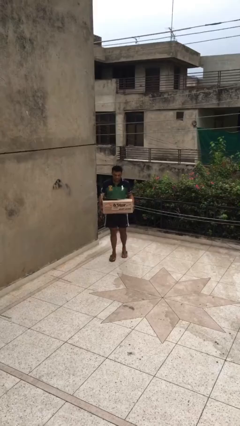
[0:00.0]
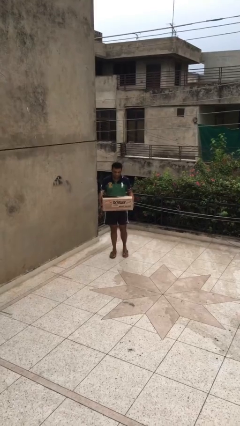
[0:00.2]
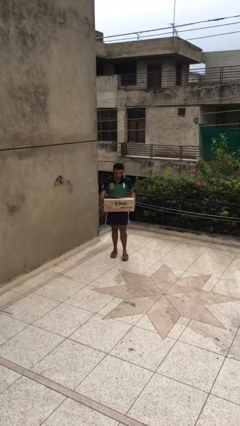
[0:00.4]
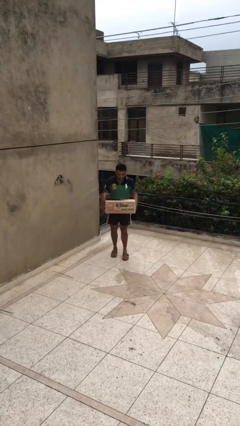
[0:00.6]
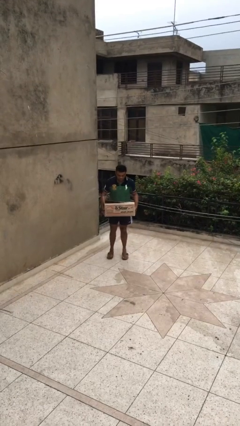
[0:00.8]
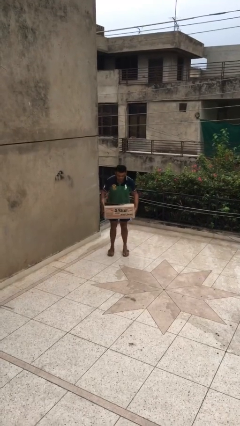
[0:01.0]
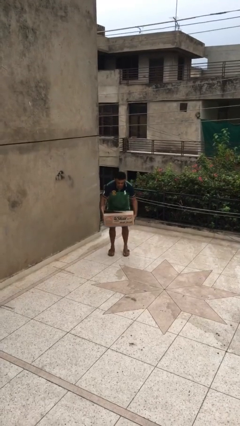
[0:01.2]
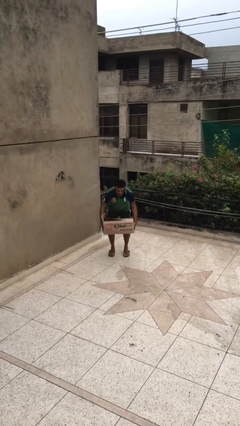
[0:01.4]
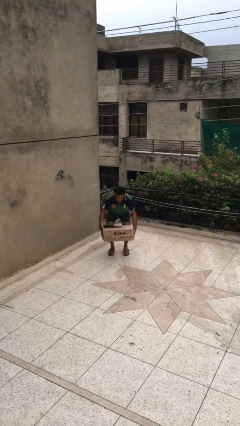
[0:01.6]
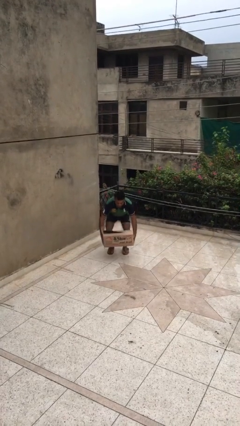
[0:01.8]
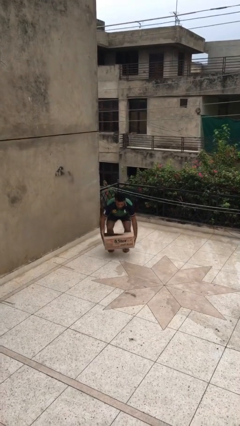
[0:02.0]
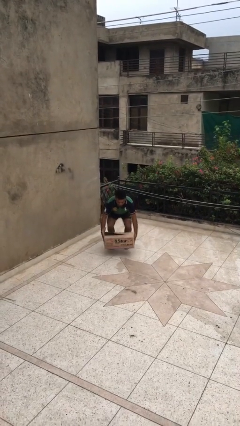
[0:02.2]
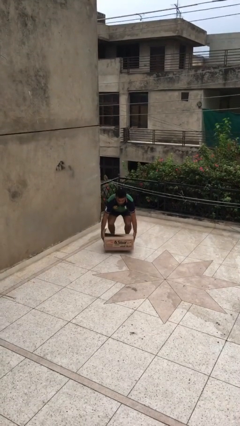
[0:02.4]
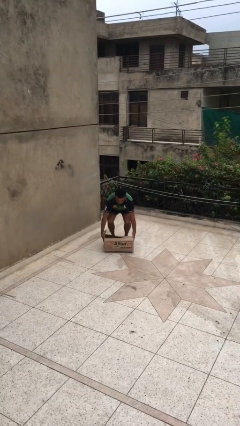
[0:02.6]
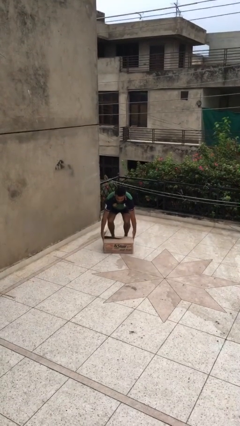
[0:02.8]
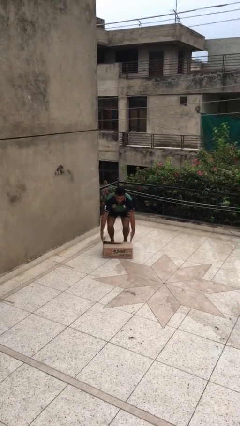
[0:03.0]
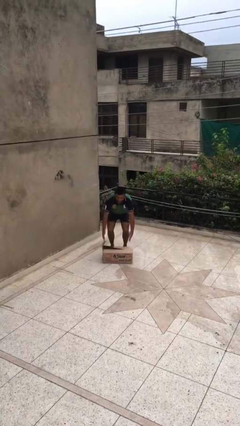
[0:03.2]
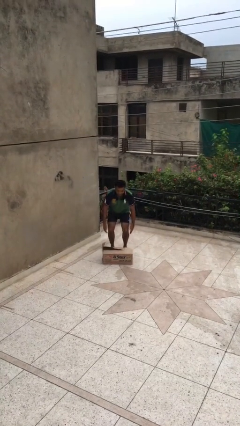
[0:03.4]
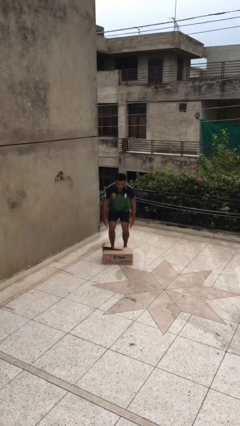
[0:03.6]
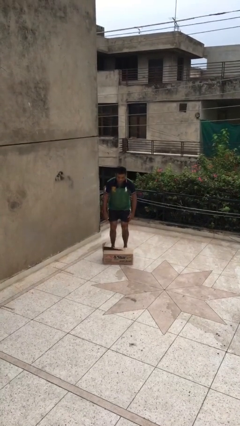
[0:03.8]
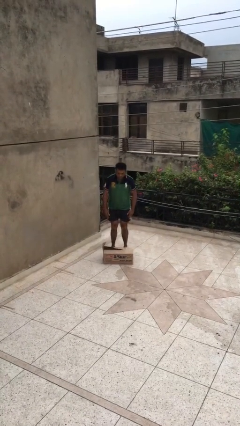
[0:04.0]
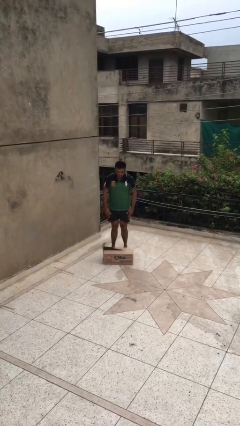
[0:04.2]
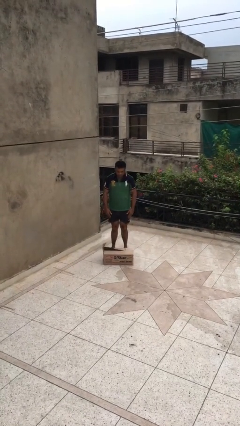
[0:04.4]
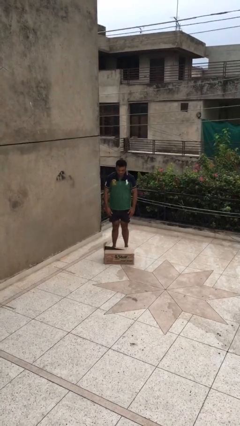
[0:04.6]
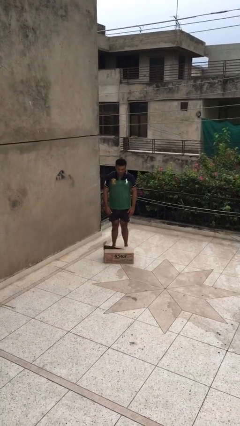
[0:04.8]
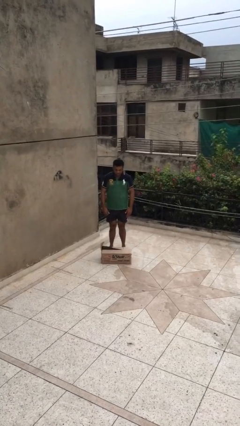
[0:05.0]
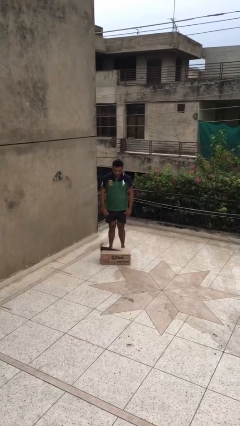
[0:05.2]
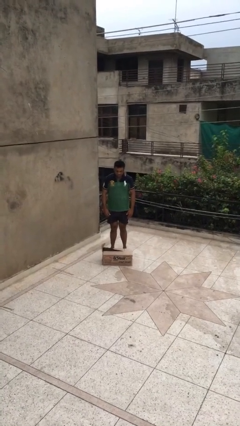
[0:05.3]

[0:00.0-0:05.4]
person puts down object on floor

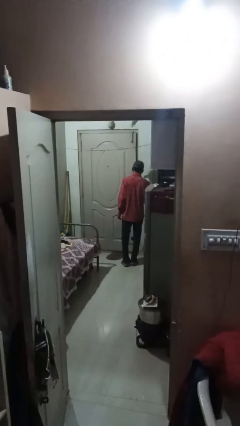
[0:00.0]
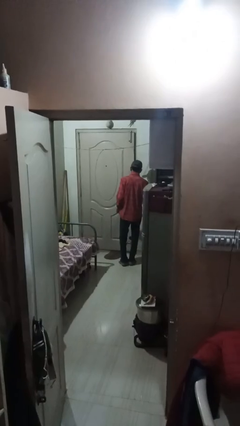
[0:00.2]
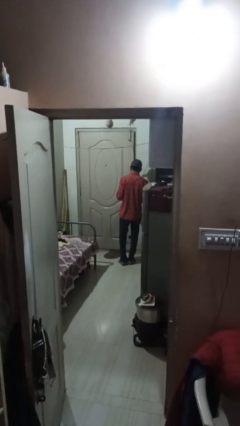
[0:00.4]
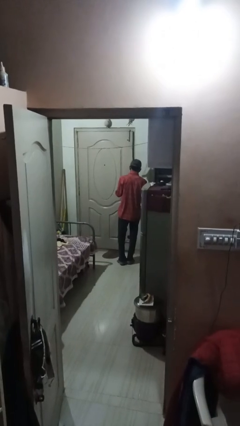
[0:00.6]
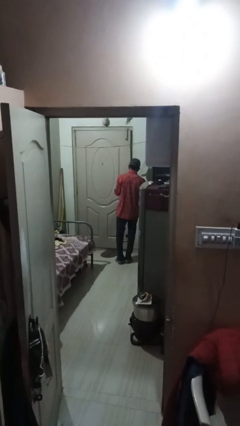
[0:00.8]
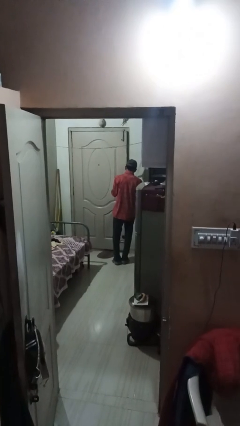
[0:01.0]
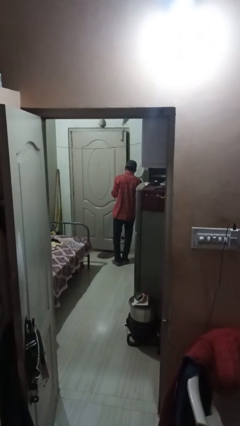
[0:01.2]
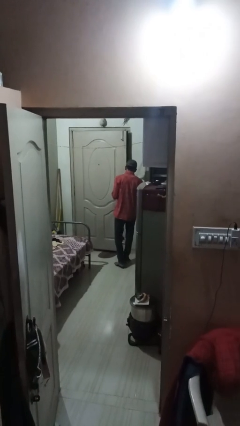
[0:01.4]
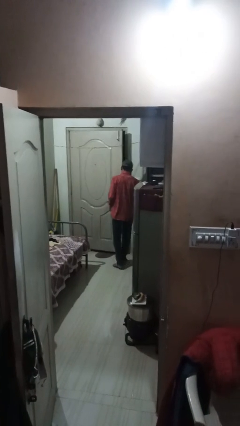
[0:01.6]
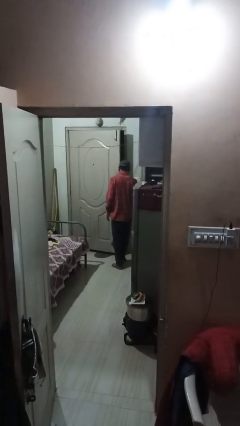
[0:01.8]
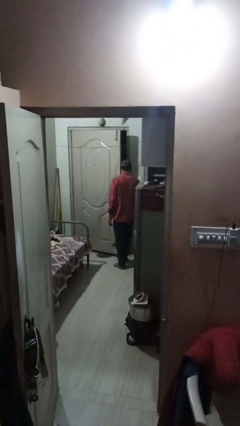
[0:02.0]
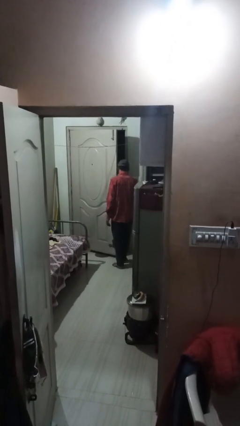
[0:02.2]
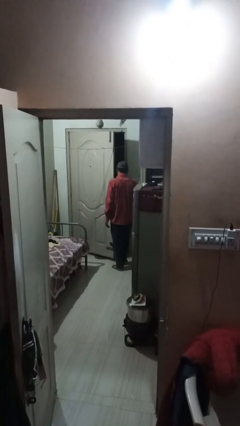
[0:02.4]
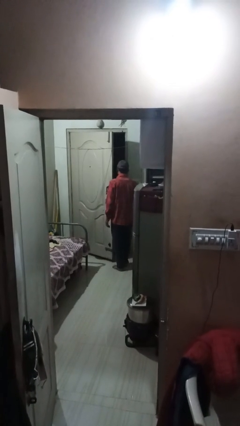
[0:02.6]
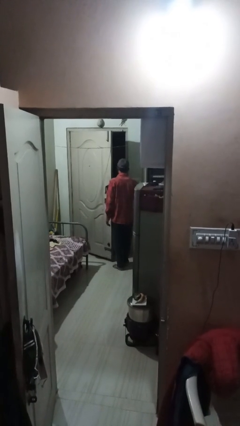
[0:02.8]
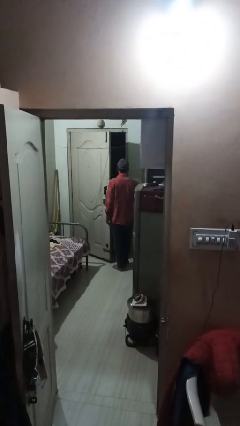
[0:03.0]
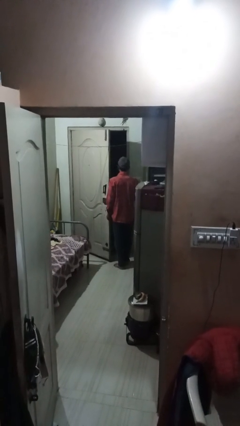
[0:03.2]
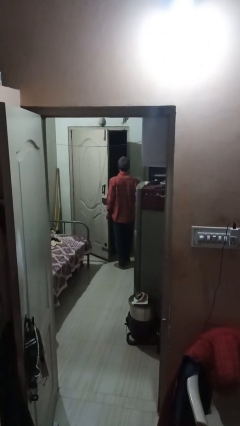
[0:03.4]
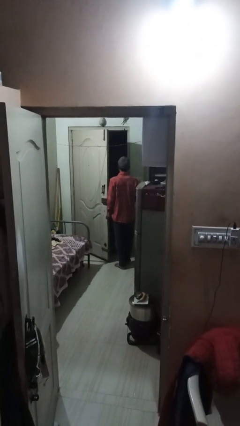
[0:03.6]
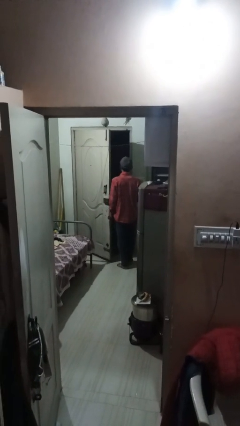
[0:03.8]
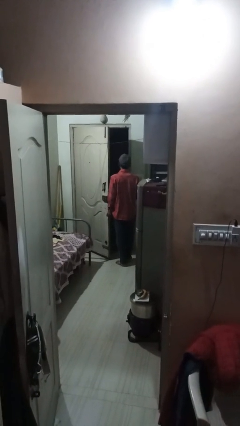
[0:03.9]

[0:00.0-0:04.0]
person opens facility door

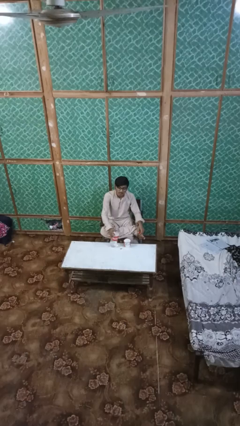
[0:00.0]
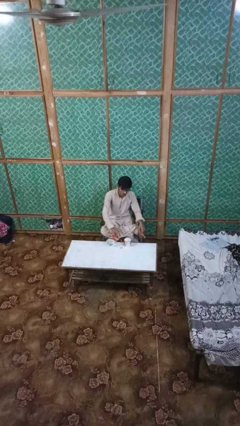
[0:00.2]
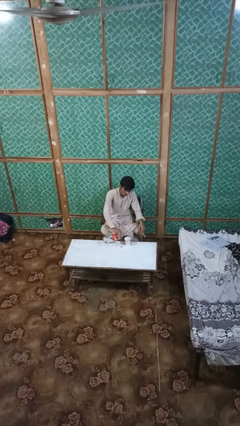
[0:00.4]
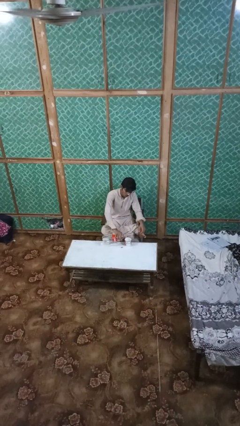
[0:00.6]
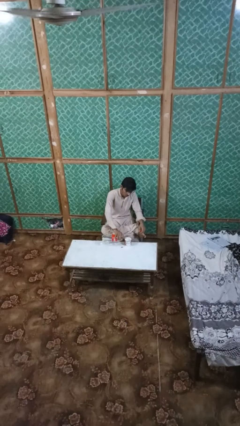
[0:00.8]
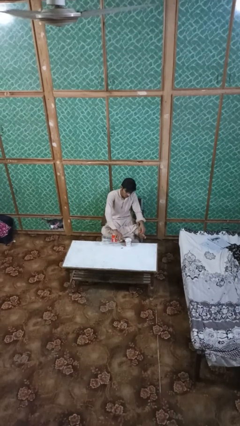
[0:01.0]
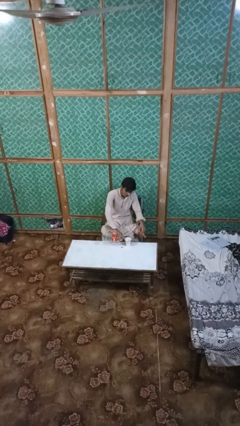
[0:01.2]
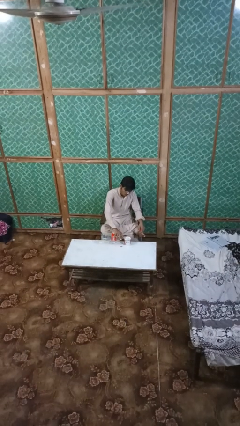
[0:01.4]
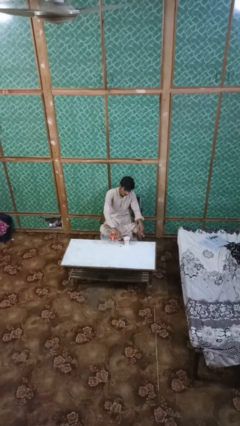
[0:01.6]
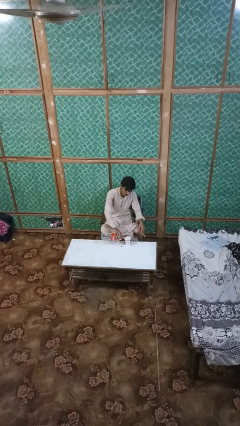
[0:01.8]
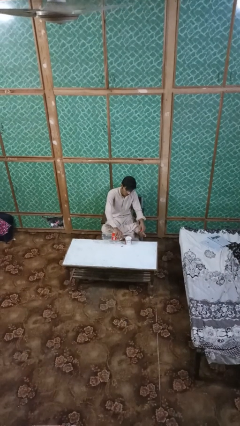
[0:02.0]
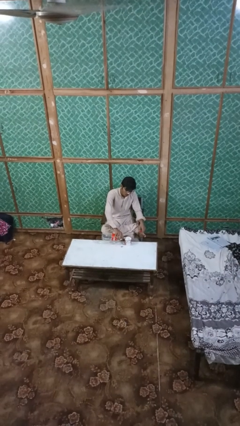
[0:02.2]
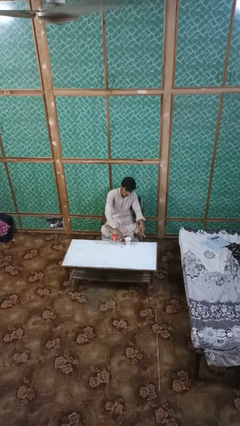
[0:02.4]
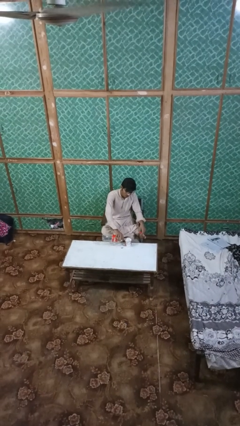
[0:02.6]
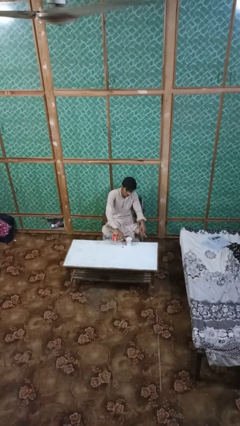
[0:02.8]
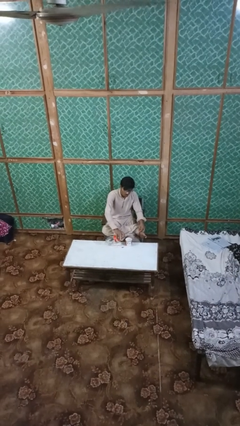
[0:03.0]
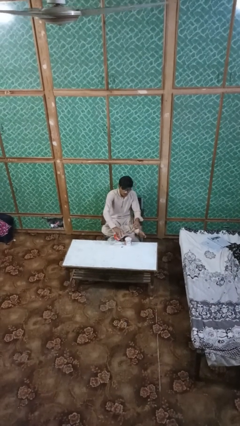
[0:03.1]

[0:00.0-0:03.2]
person pours liquid into cup

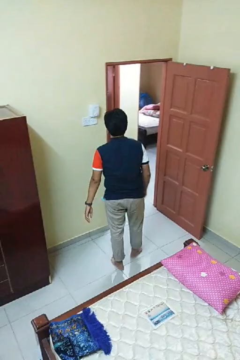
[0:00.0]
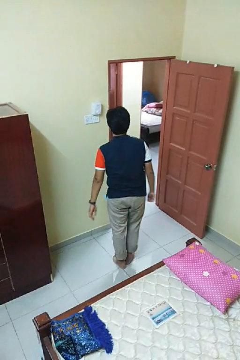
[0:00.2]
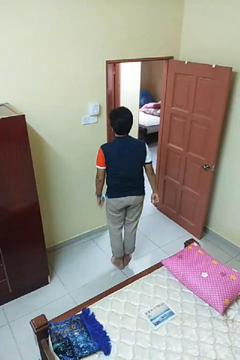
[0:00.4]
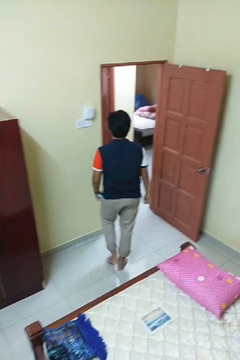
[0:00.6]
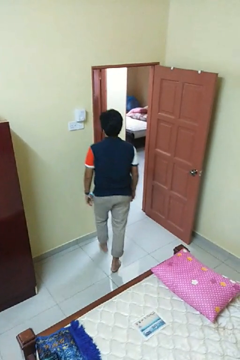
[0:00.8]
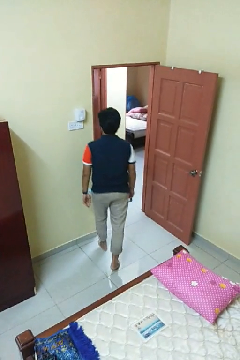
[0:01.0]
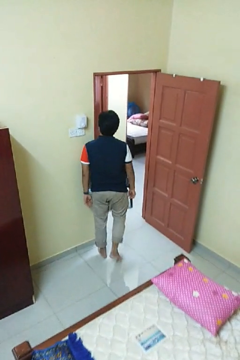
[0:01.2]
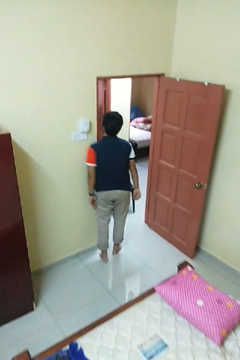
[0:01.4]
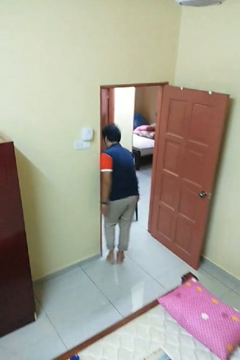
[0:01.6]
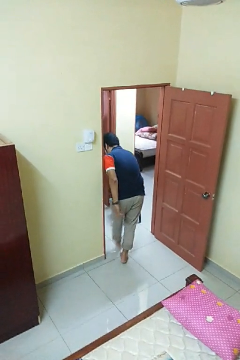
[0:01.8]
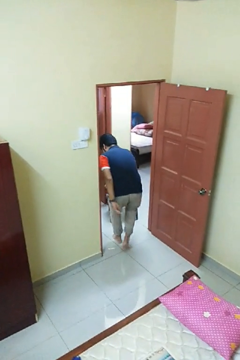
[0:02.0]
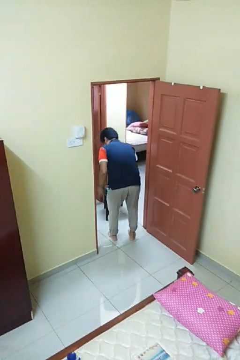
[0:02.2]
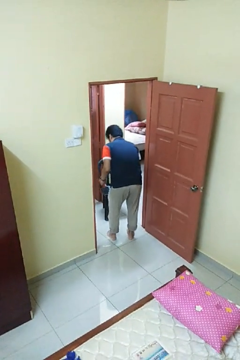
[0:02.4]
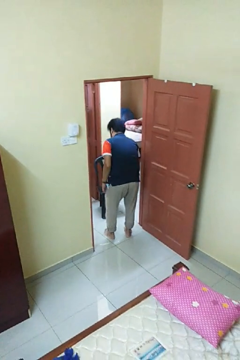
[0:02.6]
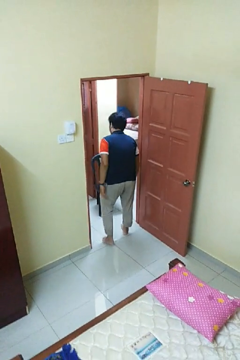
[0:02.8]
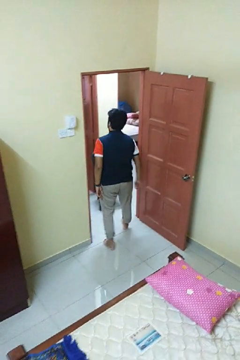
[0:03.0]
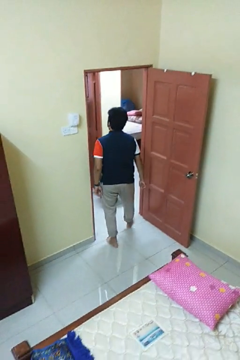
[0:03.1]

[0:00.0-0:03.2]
person bumps into wall

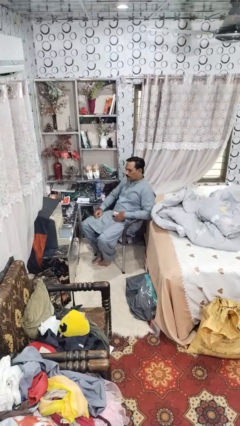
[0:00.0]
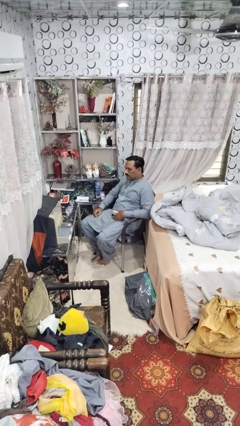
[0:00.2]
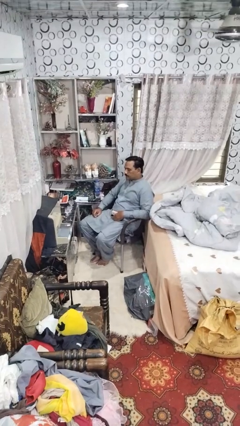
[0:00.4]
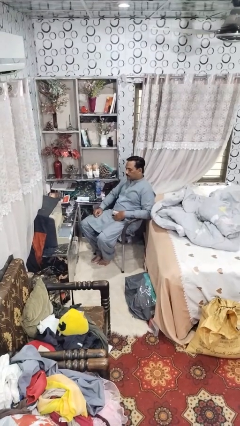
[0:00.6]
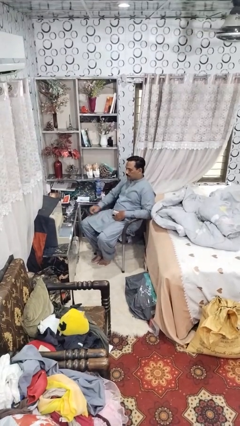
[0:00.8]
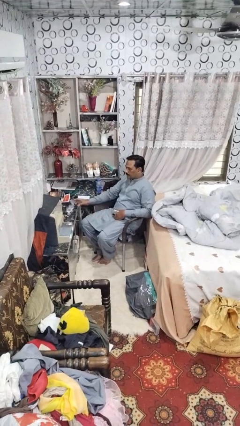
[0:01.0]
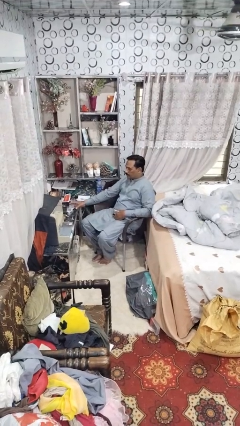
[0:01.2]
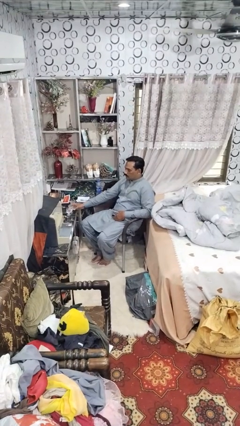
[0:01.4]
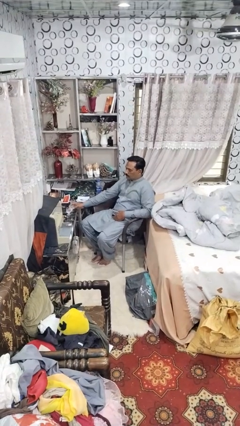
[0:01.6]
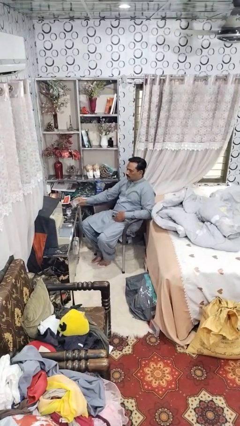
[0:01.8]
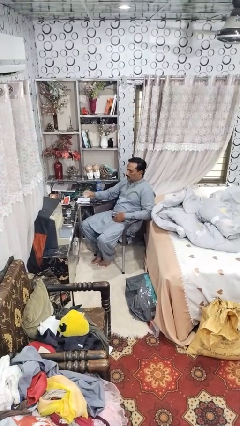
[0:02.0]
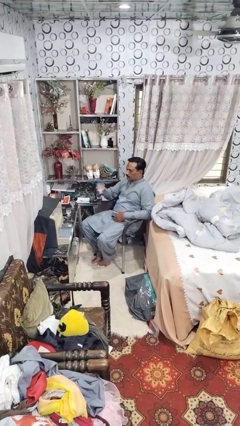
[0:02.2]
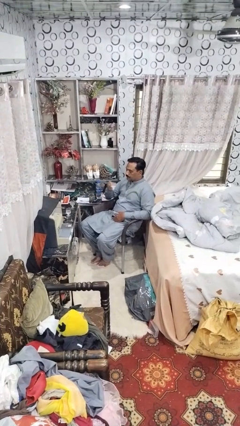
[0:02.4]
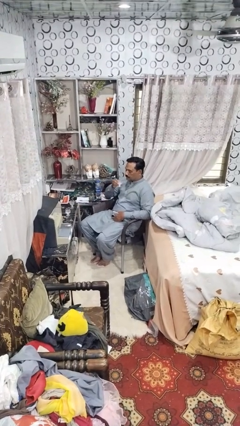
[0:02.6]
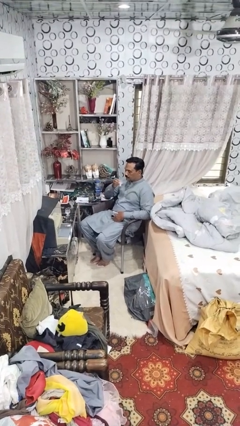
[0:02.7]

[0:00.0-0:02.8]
person picks up object from table
